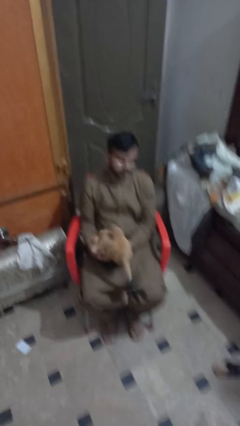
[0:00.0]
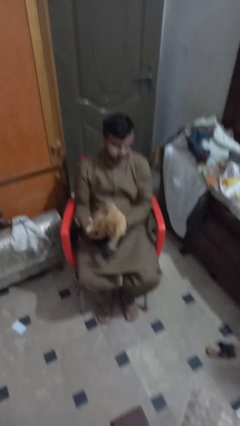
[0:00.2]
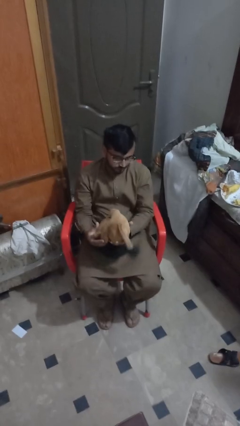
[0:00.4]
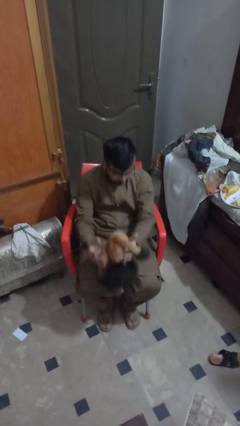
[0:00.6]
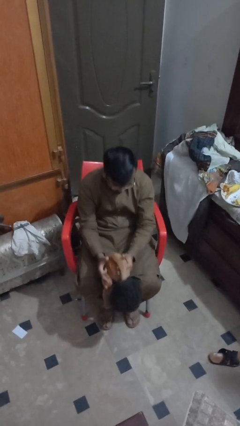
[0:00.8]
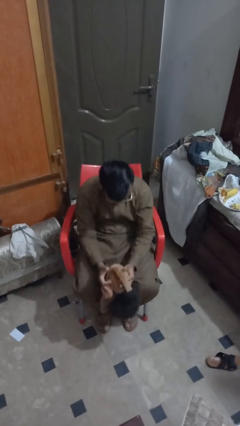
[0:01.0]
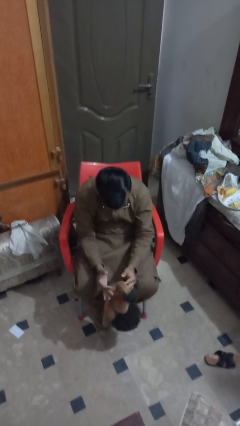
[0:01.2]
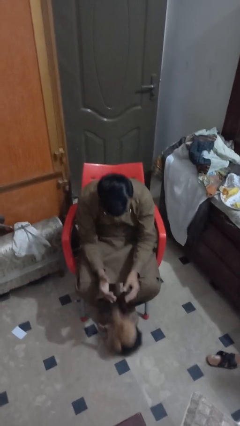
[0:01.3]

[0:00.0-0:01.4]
person catches dropped object

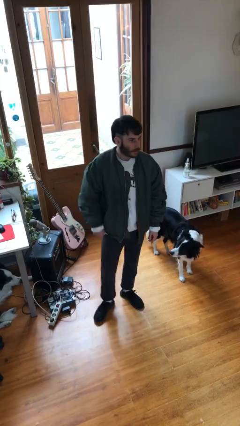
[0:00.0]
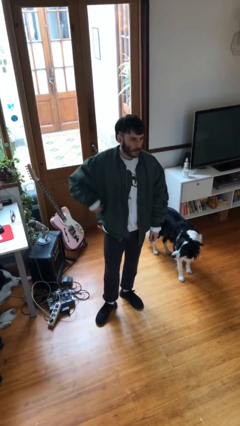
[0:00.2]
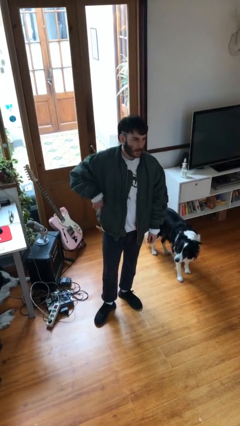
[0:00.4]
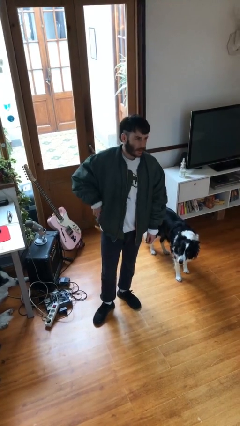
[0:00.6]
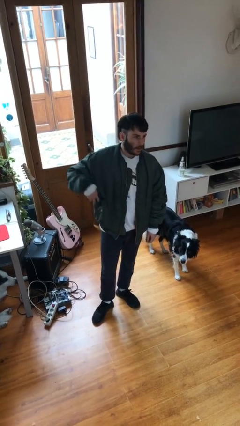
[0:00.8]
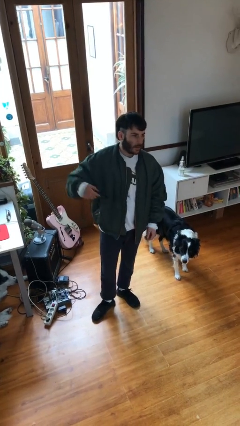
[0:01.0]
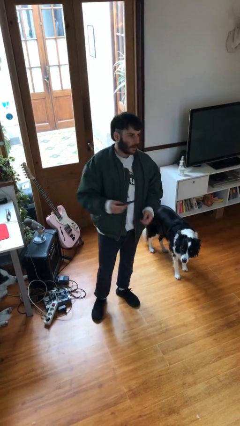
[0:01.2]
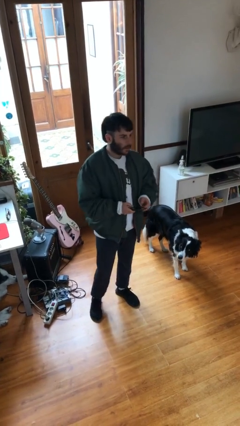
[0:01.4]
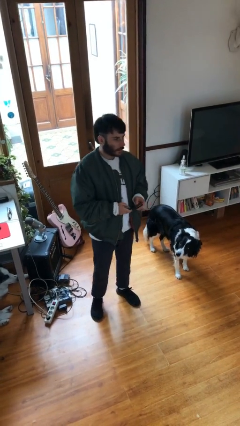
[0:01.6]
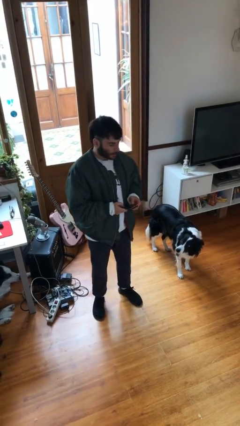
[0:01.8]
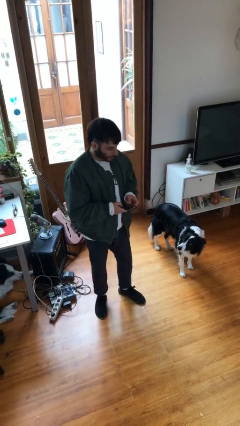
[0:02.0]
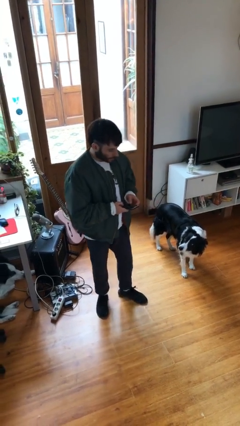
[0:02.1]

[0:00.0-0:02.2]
person takes phone from pocket

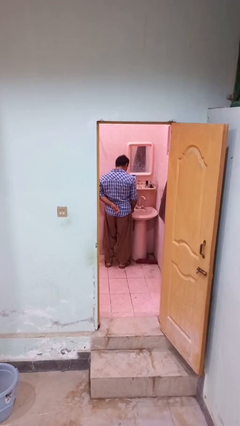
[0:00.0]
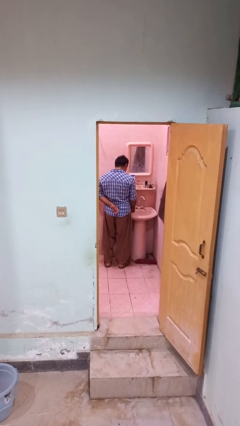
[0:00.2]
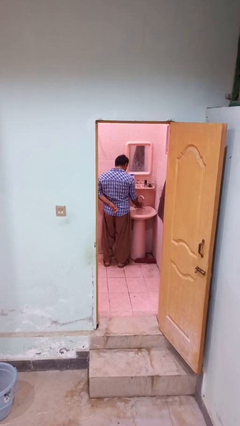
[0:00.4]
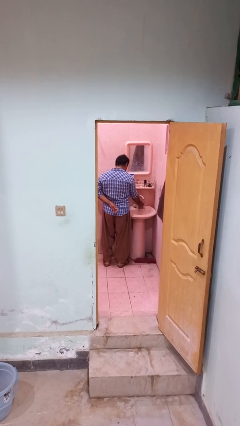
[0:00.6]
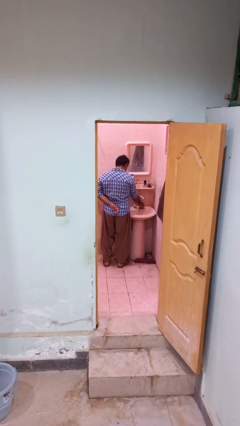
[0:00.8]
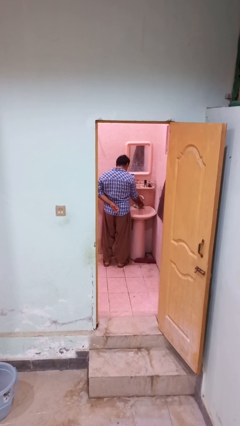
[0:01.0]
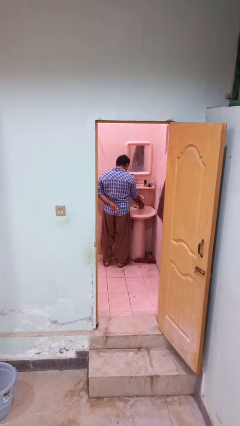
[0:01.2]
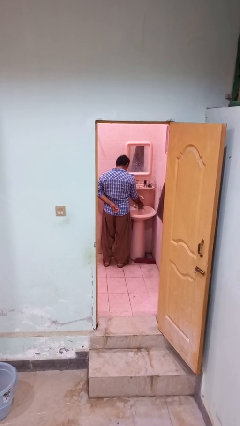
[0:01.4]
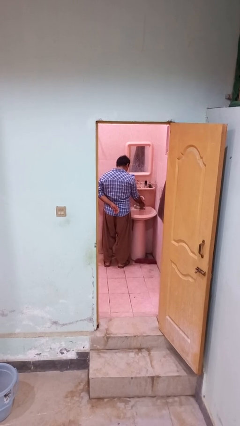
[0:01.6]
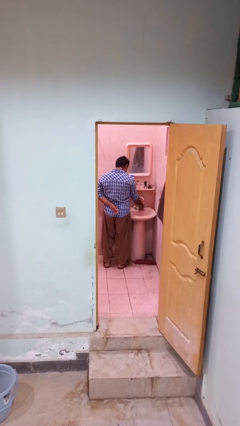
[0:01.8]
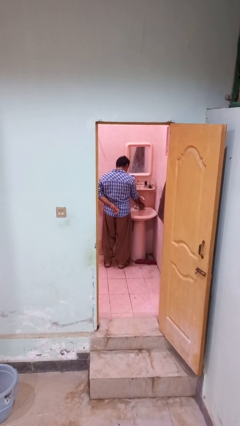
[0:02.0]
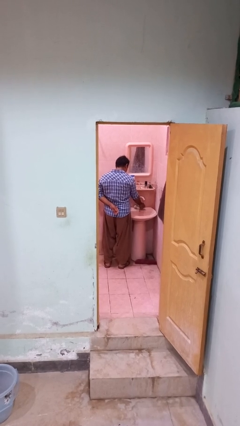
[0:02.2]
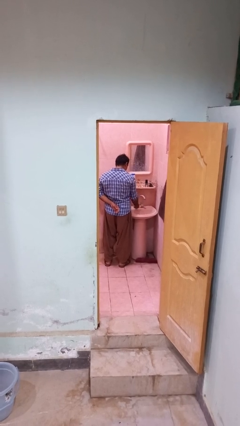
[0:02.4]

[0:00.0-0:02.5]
person turns off faucet

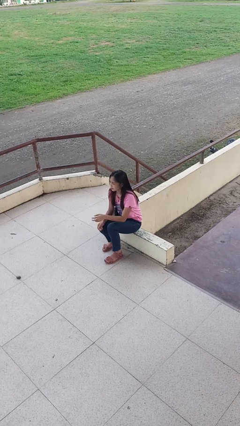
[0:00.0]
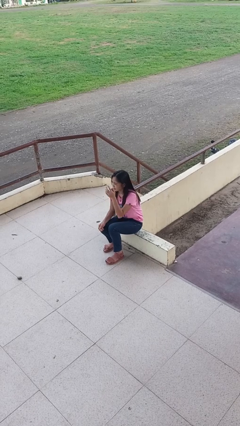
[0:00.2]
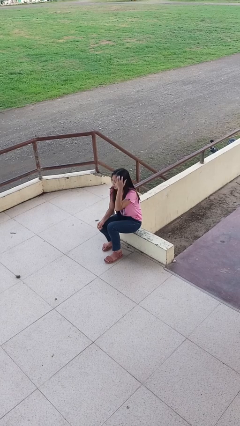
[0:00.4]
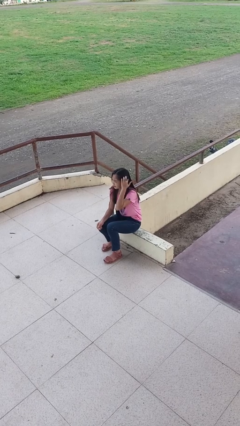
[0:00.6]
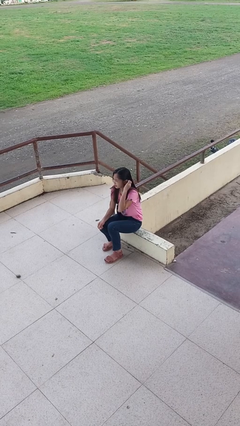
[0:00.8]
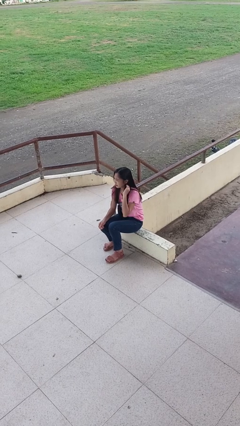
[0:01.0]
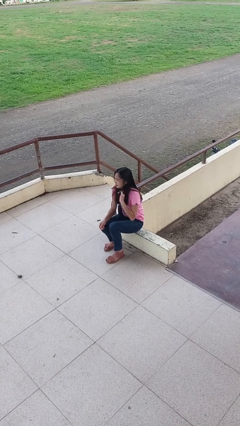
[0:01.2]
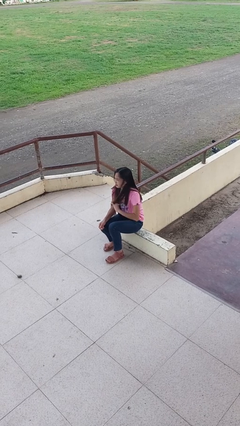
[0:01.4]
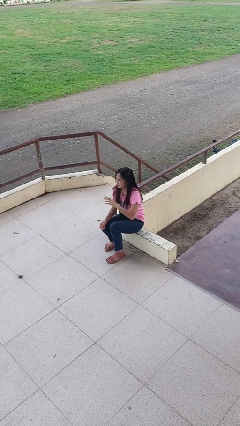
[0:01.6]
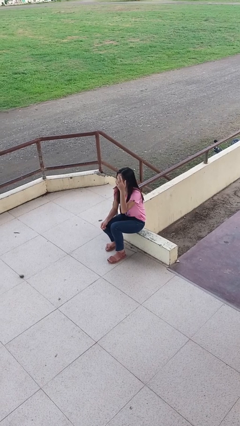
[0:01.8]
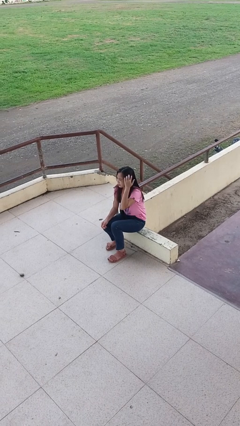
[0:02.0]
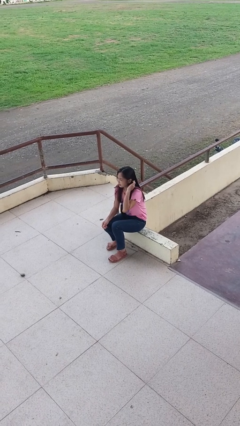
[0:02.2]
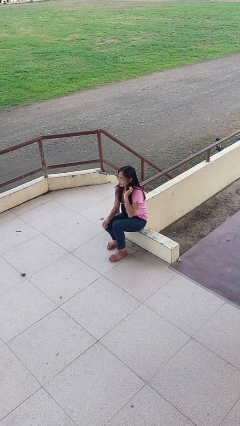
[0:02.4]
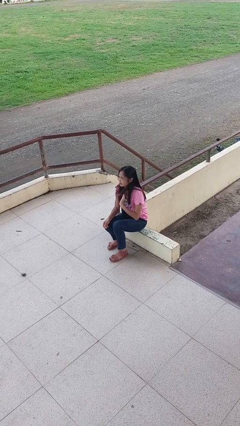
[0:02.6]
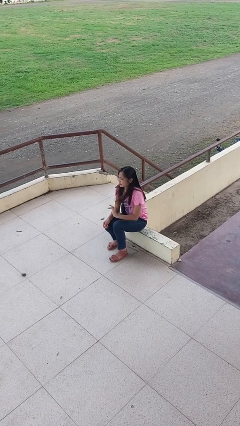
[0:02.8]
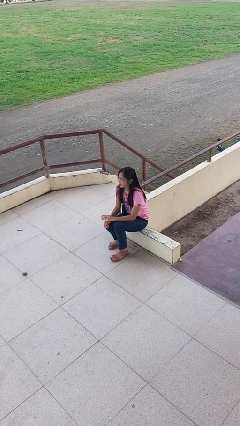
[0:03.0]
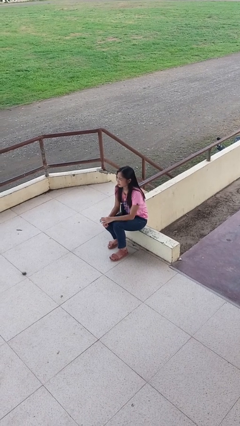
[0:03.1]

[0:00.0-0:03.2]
person strokes hair

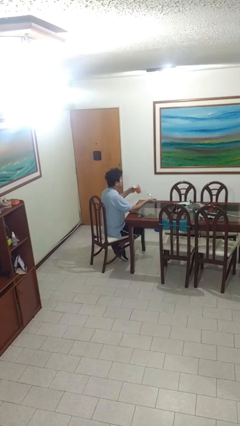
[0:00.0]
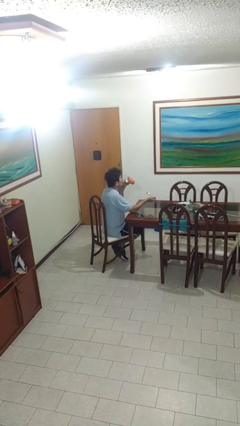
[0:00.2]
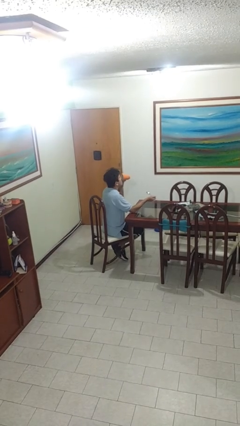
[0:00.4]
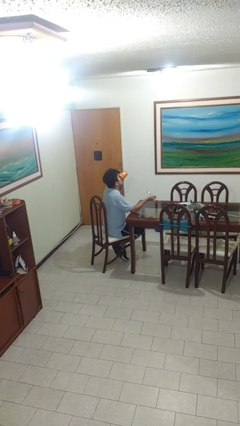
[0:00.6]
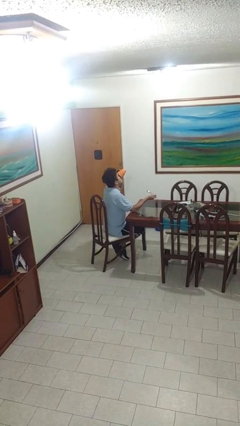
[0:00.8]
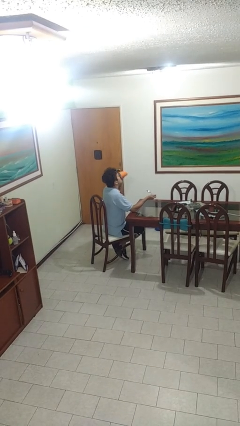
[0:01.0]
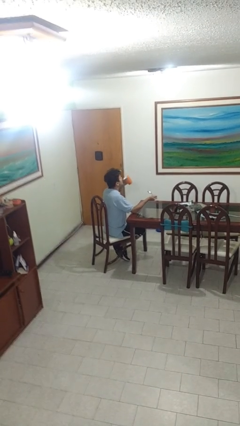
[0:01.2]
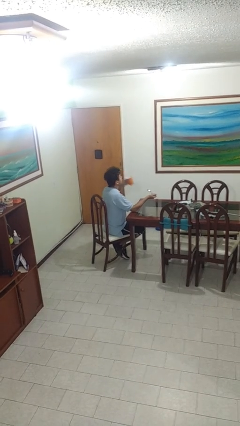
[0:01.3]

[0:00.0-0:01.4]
person drinks from mug

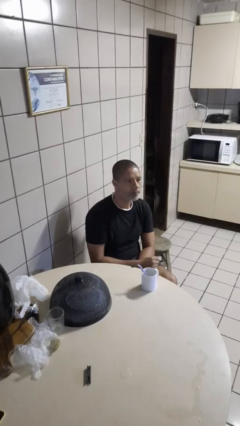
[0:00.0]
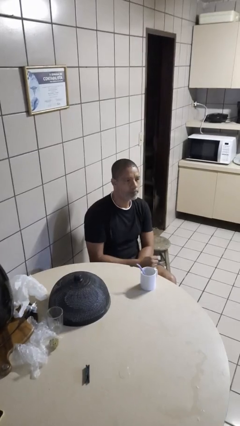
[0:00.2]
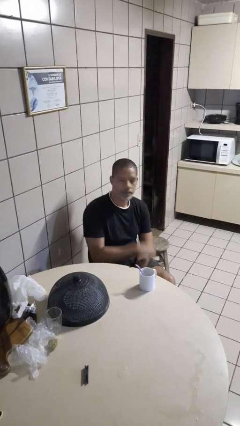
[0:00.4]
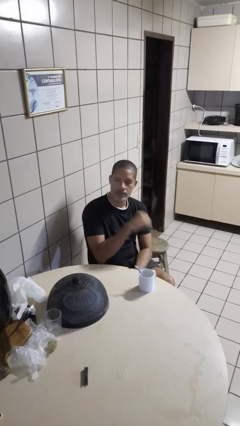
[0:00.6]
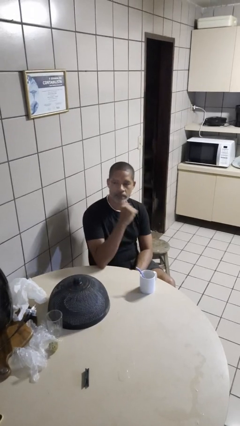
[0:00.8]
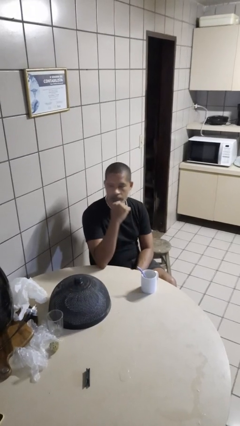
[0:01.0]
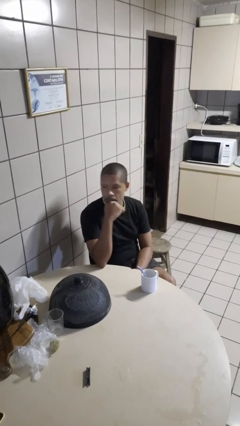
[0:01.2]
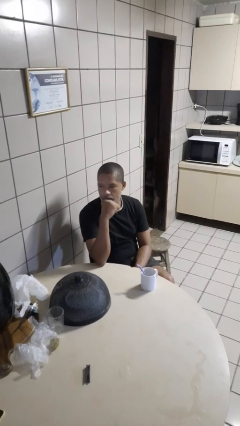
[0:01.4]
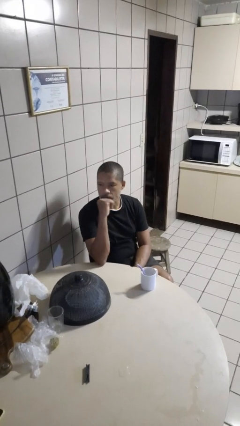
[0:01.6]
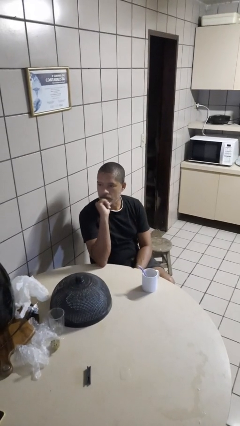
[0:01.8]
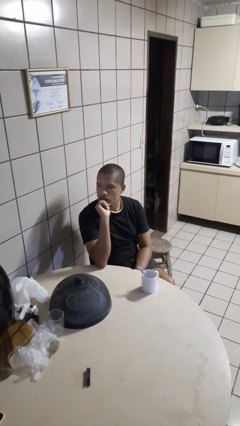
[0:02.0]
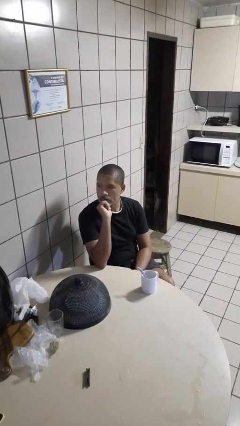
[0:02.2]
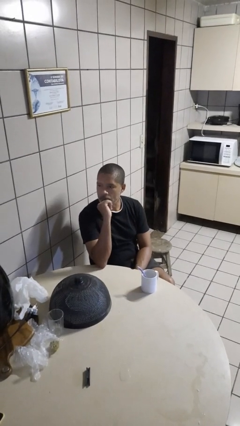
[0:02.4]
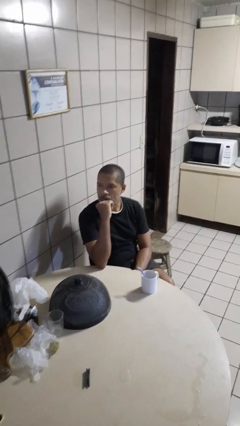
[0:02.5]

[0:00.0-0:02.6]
person strokes chin

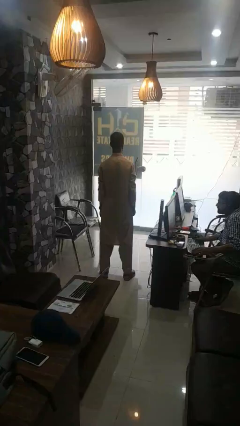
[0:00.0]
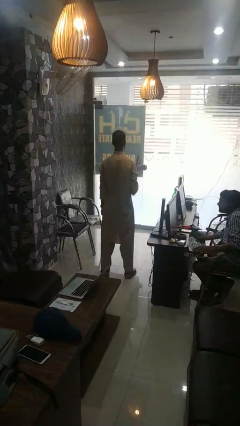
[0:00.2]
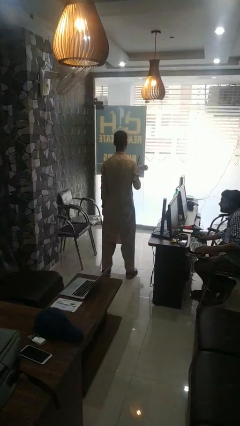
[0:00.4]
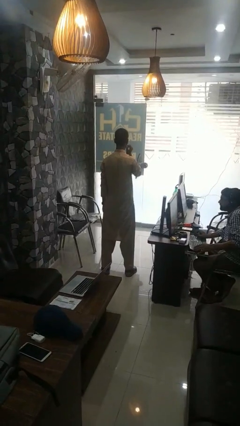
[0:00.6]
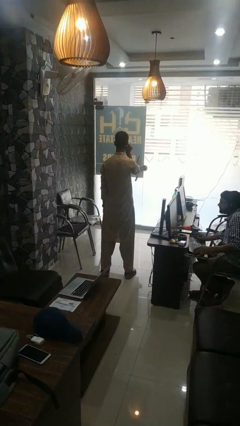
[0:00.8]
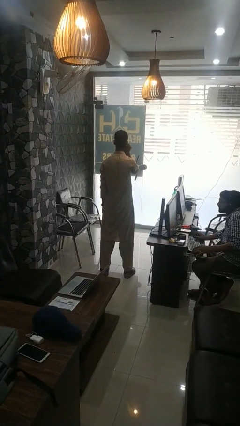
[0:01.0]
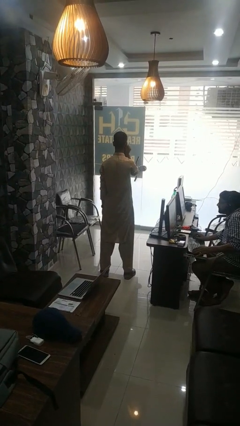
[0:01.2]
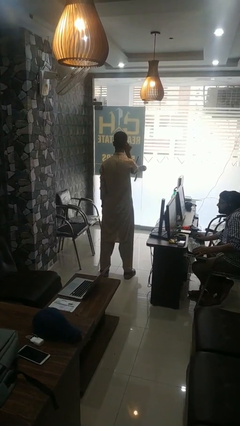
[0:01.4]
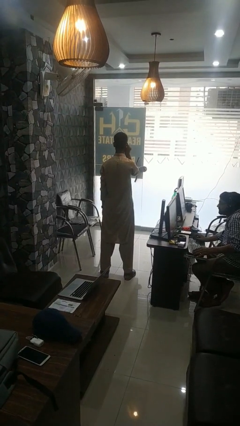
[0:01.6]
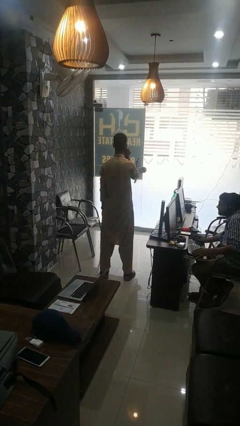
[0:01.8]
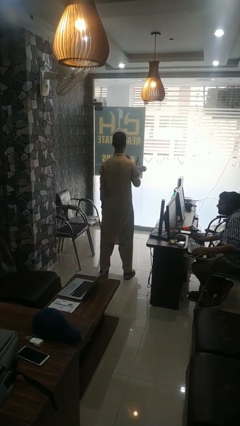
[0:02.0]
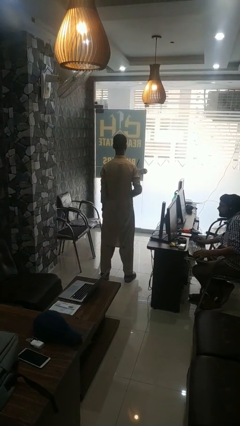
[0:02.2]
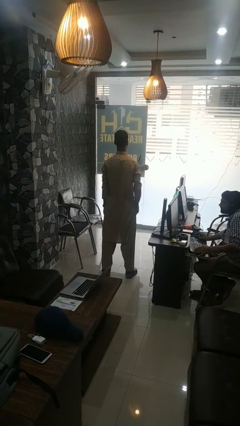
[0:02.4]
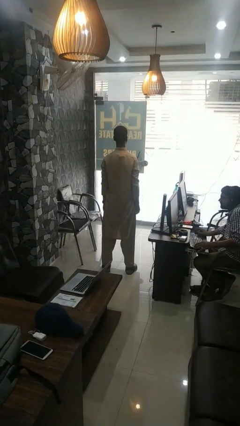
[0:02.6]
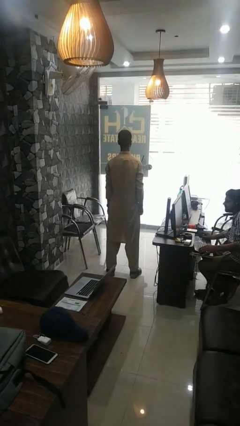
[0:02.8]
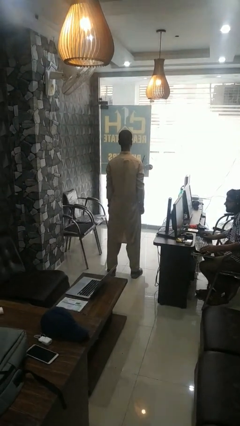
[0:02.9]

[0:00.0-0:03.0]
person touches earlobe

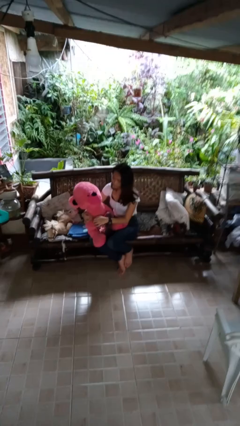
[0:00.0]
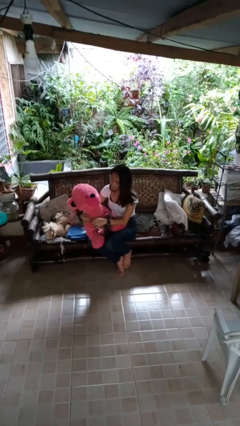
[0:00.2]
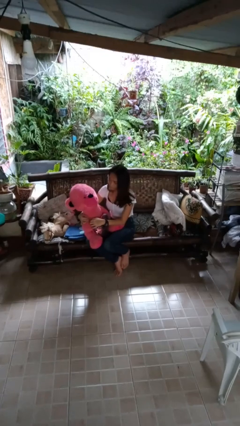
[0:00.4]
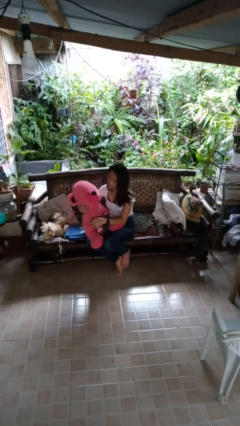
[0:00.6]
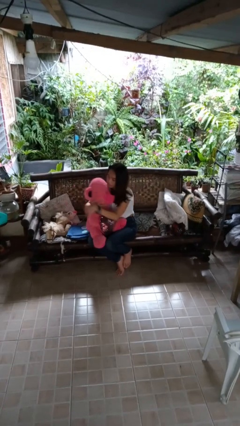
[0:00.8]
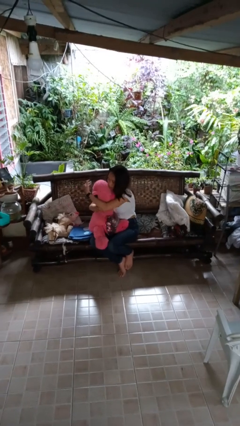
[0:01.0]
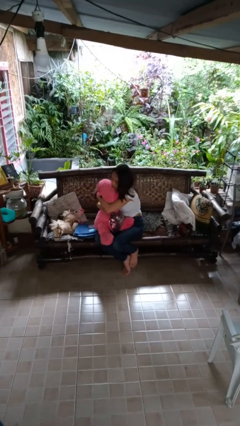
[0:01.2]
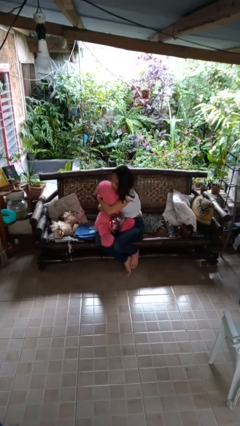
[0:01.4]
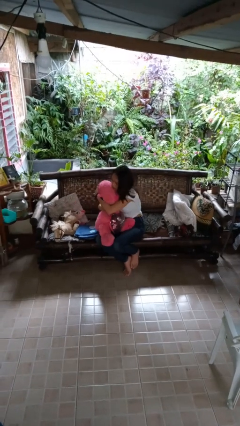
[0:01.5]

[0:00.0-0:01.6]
person hugs stuffed animal
